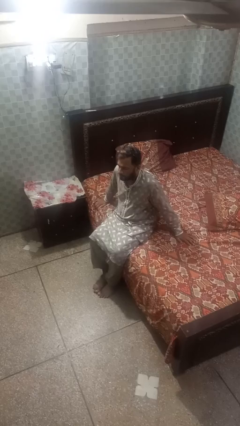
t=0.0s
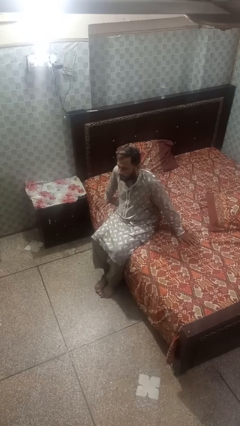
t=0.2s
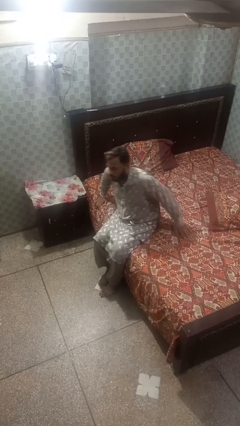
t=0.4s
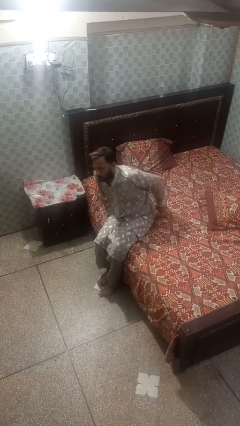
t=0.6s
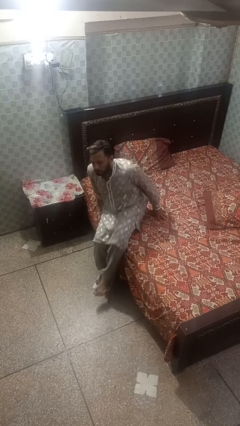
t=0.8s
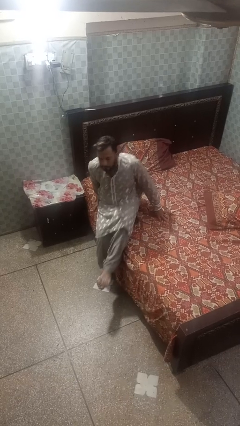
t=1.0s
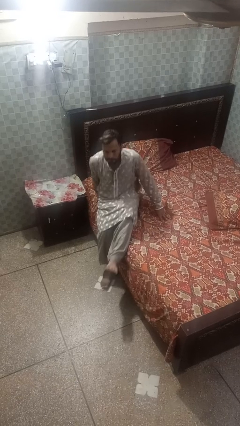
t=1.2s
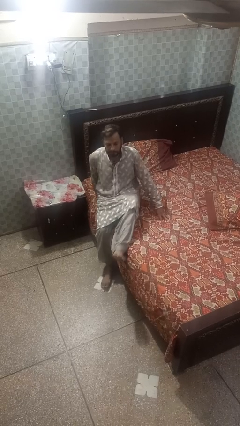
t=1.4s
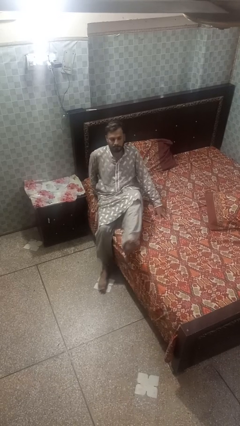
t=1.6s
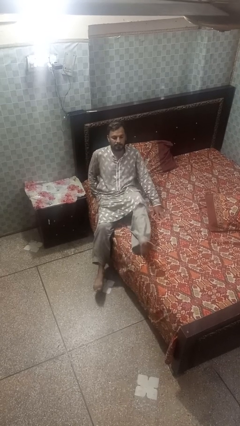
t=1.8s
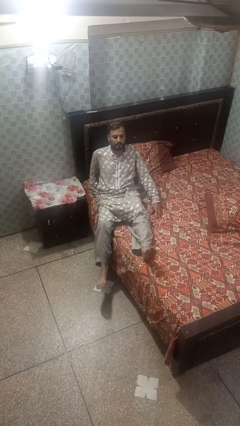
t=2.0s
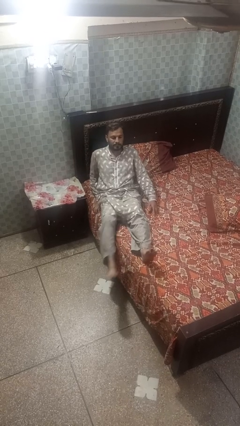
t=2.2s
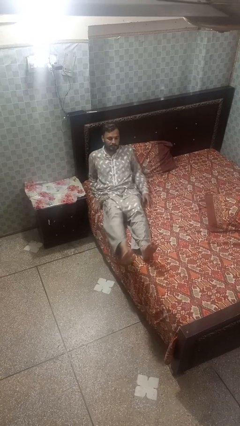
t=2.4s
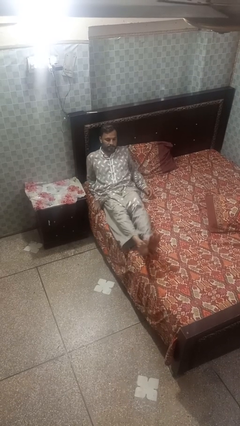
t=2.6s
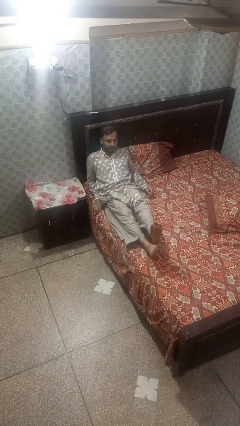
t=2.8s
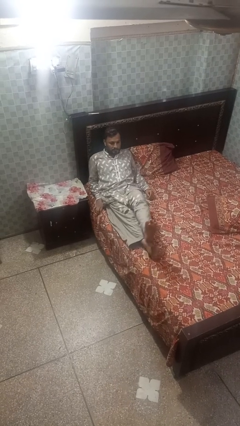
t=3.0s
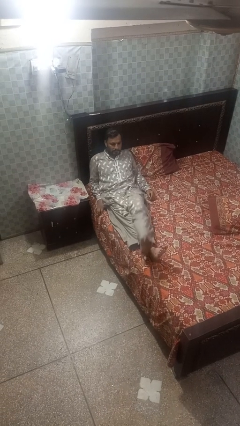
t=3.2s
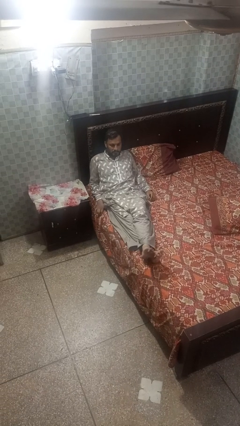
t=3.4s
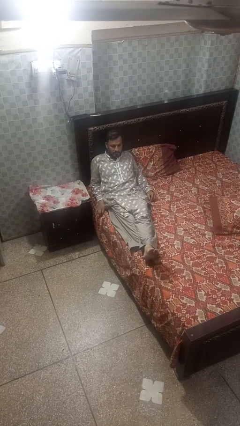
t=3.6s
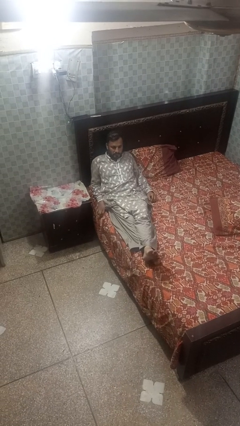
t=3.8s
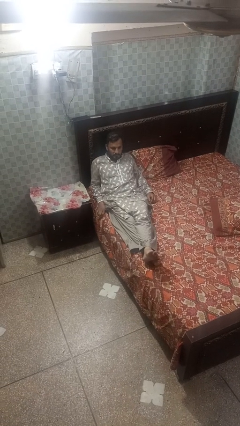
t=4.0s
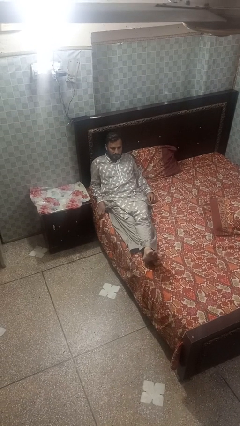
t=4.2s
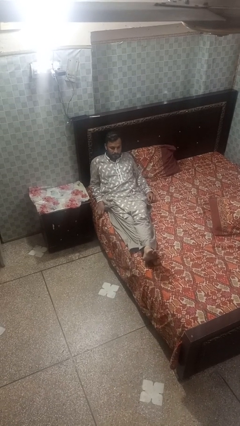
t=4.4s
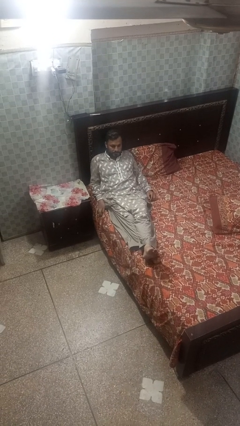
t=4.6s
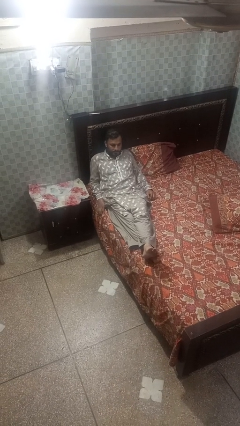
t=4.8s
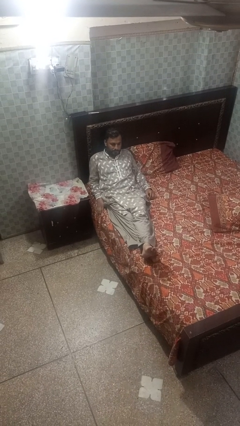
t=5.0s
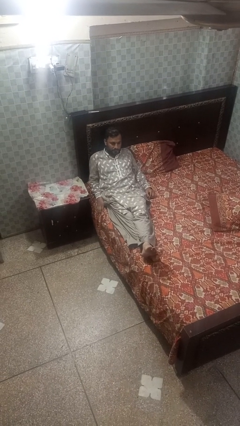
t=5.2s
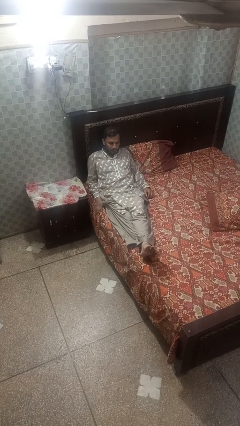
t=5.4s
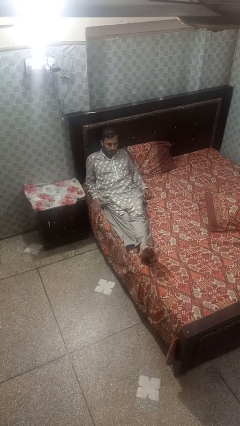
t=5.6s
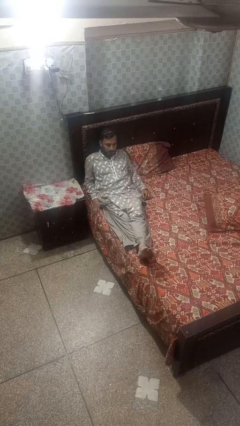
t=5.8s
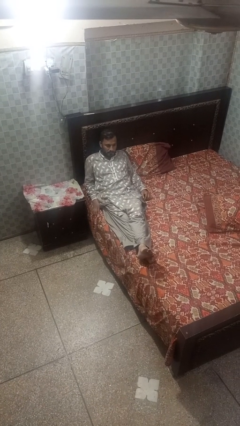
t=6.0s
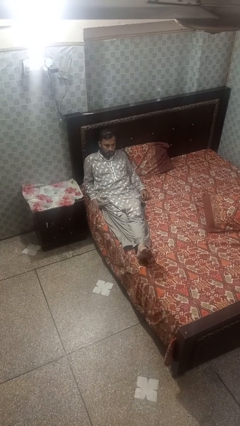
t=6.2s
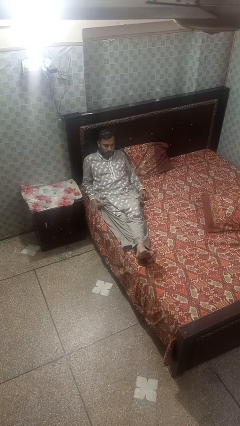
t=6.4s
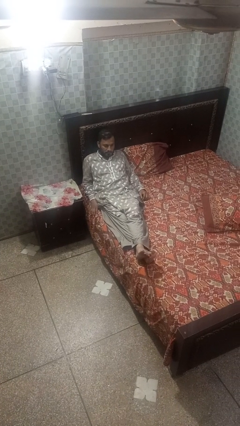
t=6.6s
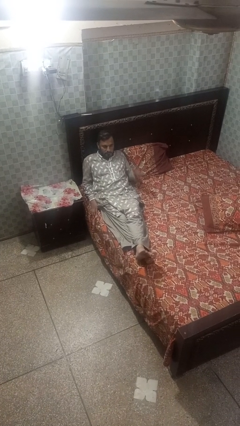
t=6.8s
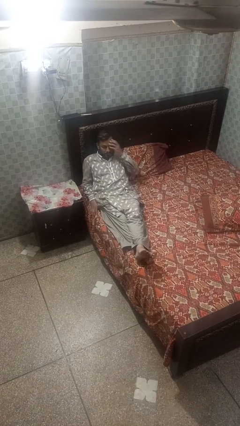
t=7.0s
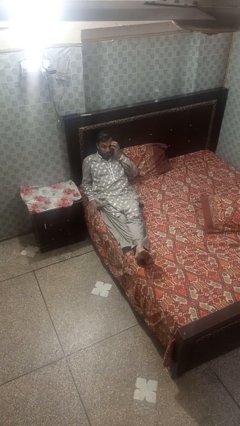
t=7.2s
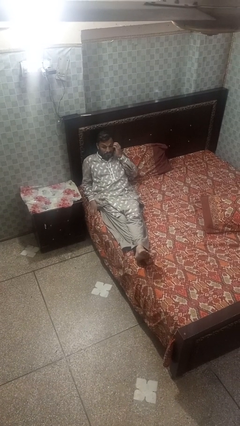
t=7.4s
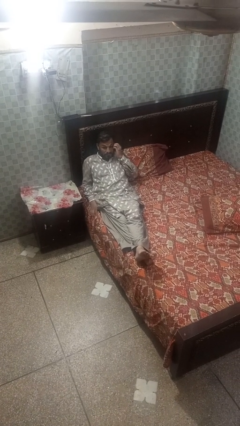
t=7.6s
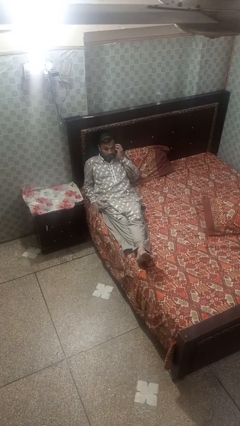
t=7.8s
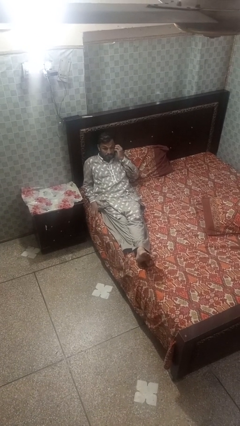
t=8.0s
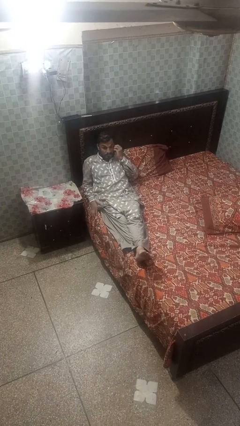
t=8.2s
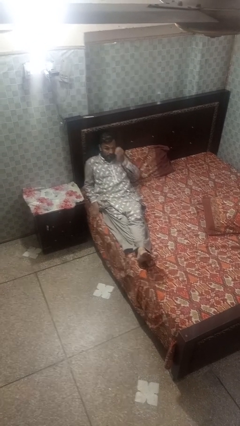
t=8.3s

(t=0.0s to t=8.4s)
person lies down on bed

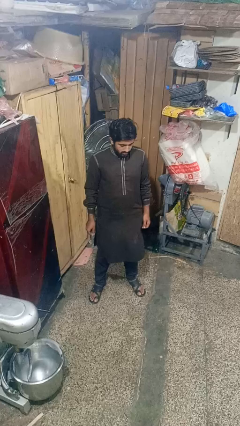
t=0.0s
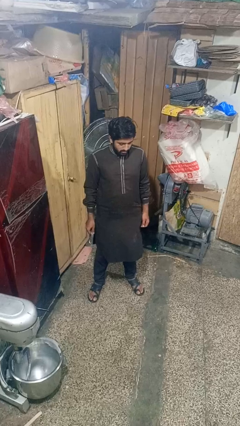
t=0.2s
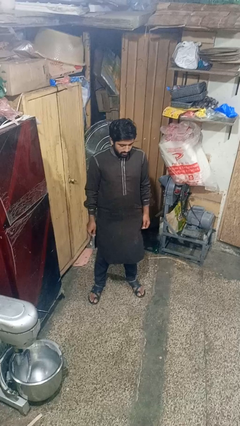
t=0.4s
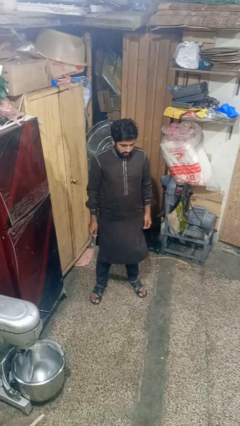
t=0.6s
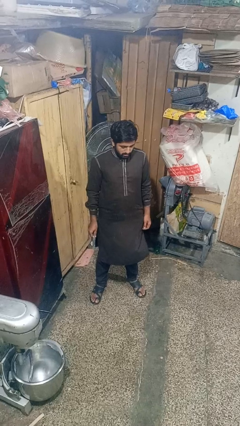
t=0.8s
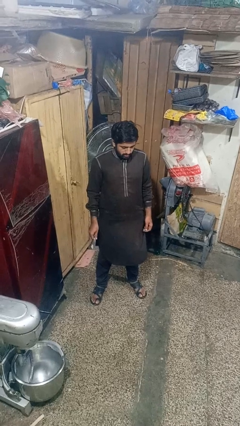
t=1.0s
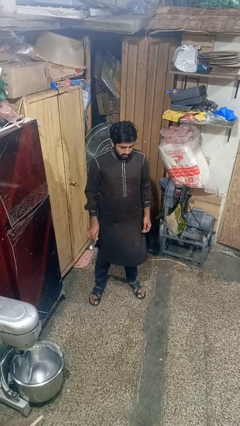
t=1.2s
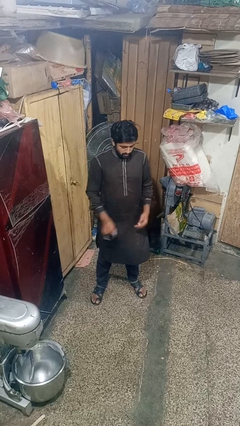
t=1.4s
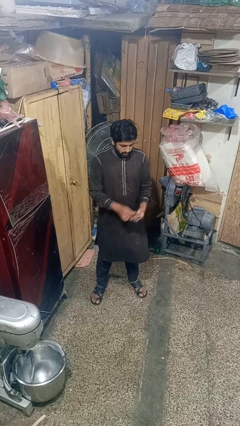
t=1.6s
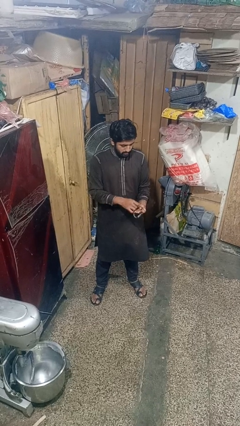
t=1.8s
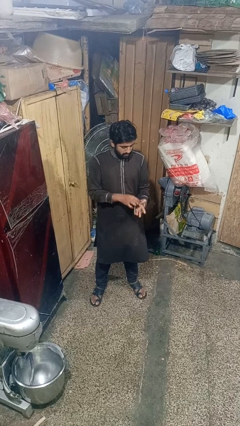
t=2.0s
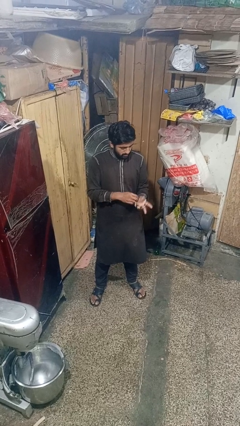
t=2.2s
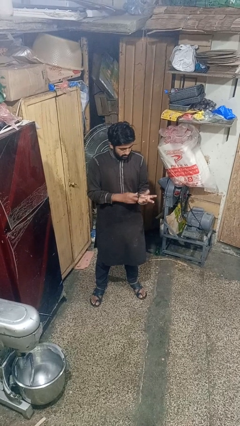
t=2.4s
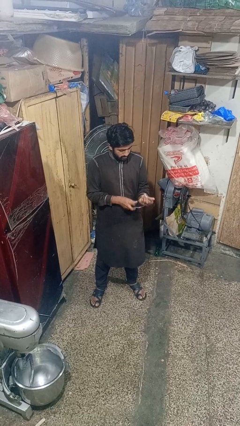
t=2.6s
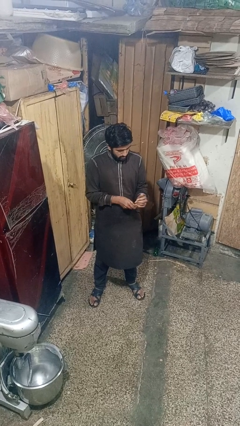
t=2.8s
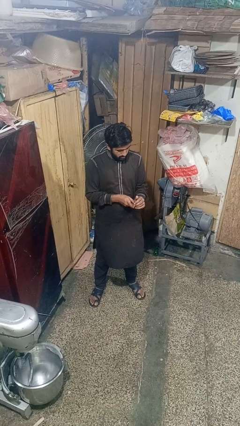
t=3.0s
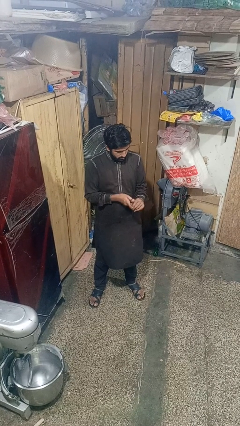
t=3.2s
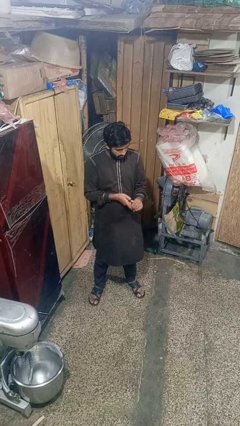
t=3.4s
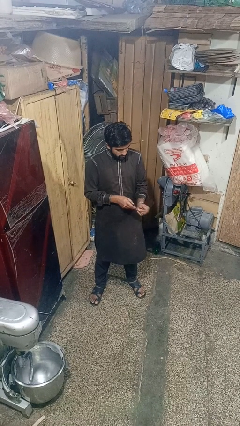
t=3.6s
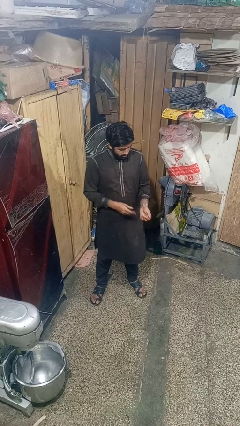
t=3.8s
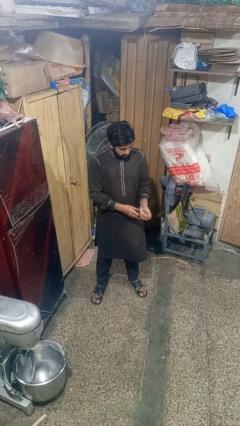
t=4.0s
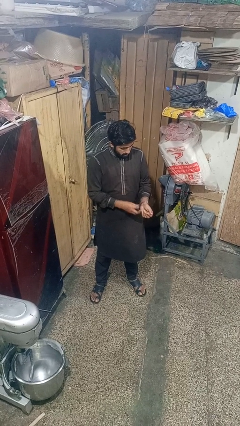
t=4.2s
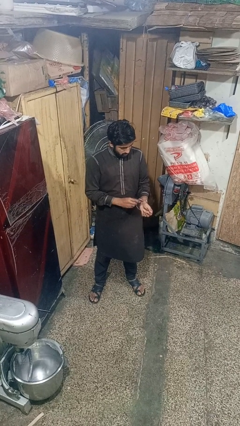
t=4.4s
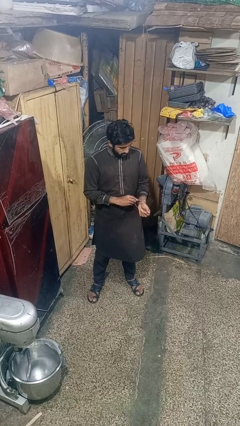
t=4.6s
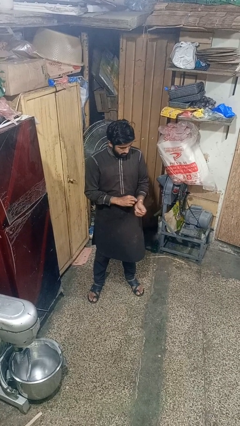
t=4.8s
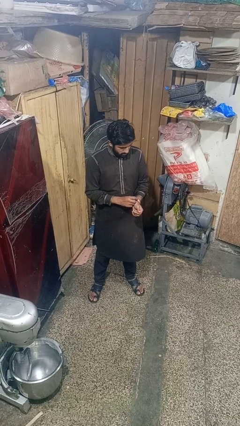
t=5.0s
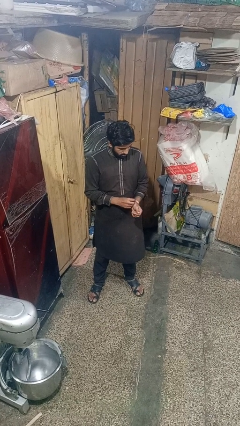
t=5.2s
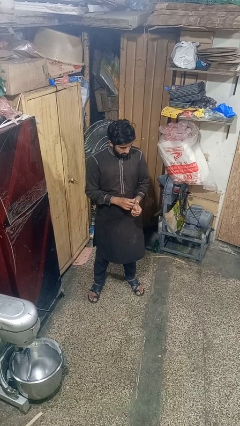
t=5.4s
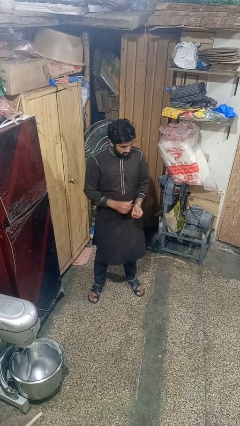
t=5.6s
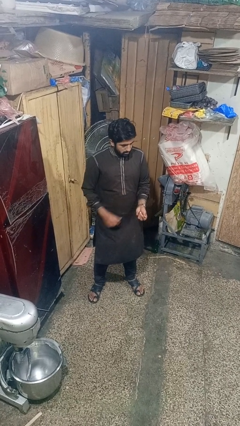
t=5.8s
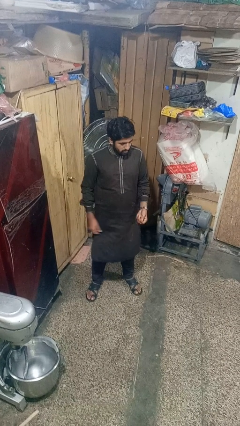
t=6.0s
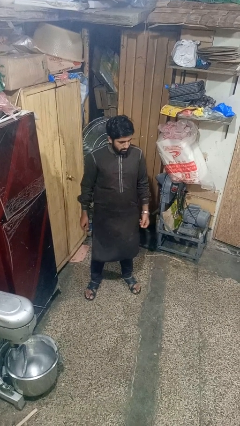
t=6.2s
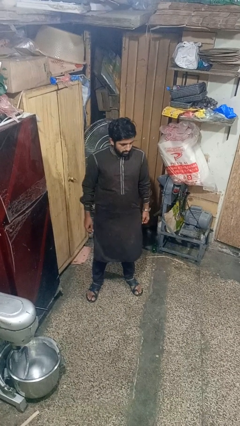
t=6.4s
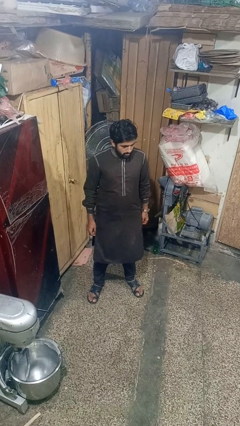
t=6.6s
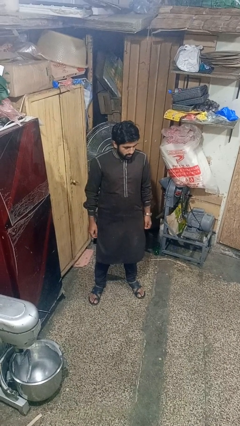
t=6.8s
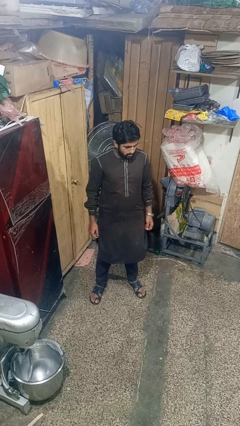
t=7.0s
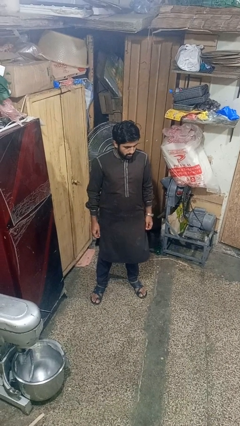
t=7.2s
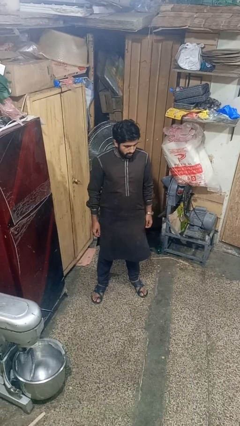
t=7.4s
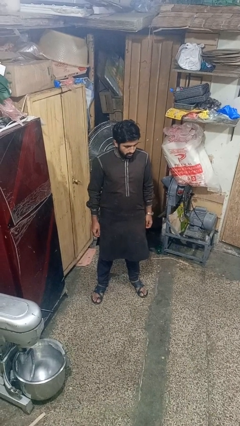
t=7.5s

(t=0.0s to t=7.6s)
person puts on wristwatch

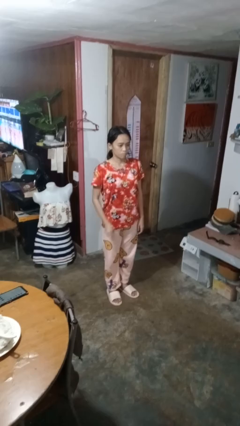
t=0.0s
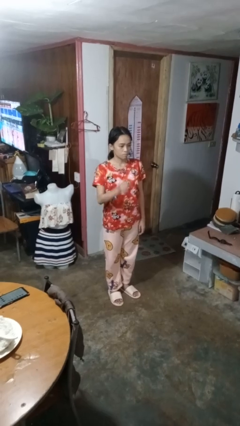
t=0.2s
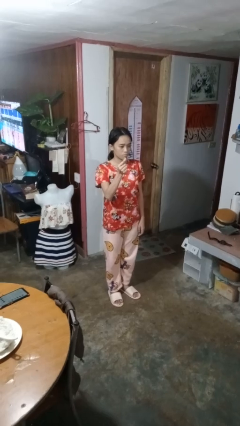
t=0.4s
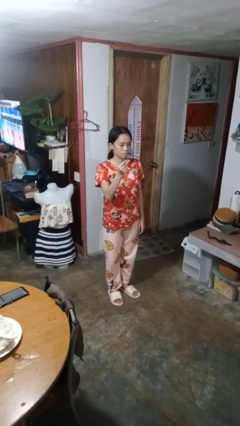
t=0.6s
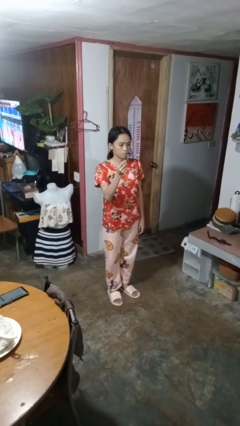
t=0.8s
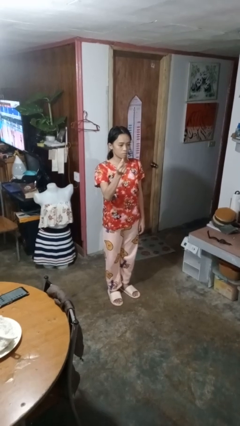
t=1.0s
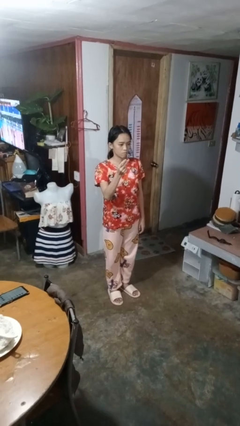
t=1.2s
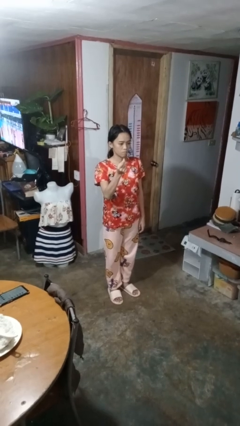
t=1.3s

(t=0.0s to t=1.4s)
person snaps fingers

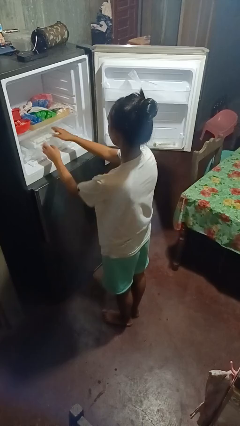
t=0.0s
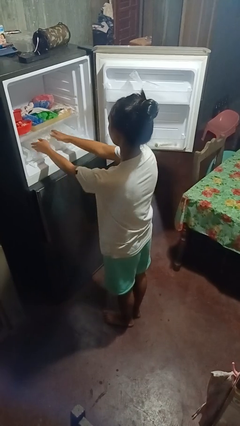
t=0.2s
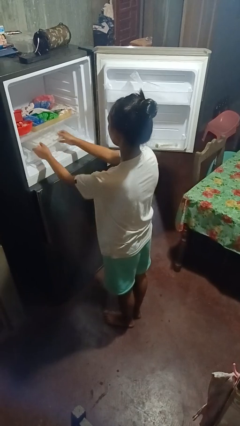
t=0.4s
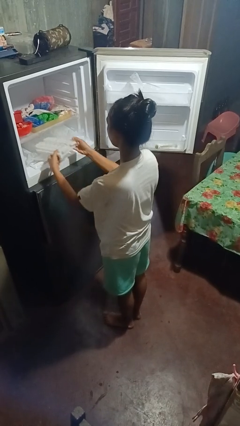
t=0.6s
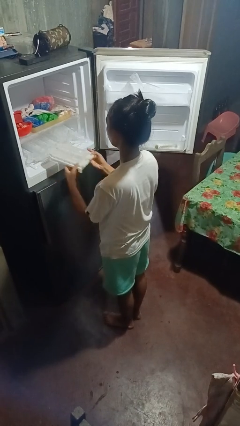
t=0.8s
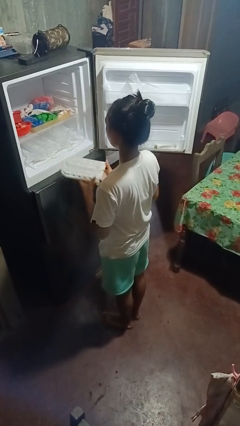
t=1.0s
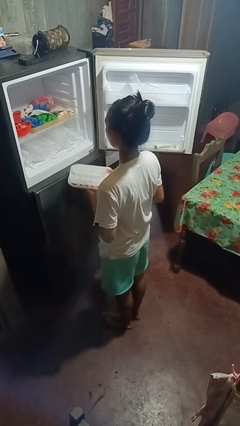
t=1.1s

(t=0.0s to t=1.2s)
person takes object from refrigerator
